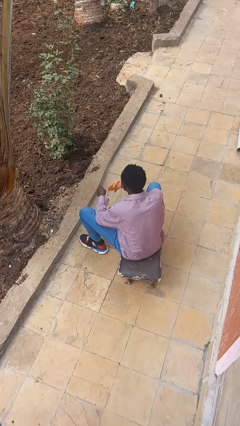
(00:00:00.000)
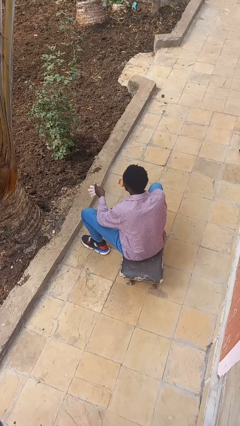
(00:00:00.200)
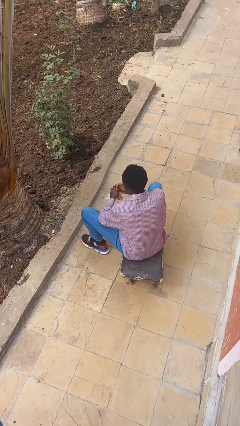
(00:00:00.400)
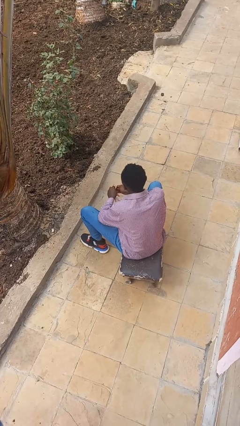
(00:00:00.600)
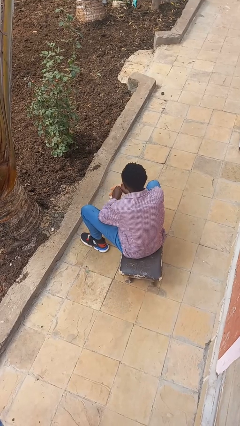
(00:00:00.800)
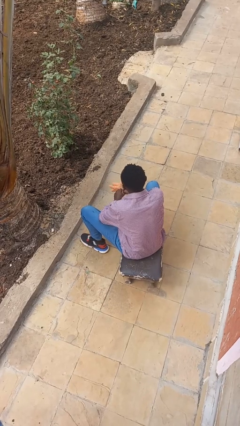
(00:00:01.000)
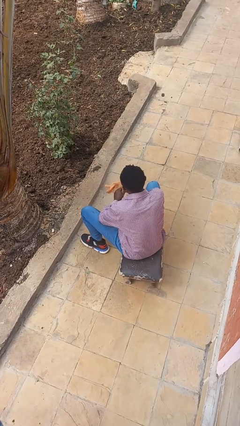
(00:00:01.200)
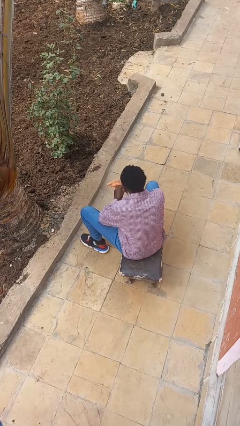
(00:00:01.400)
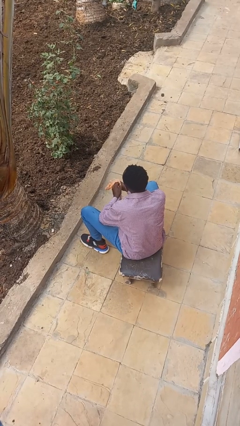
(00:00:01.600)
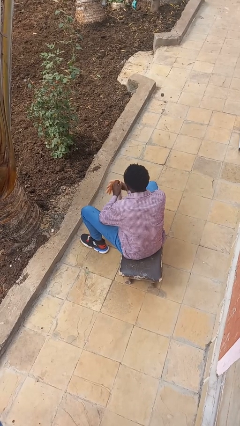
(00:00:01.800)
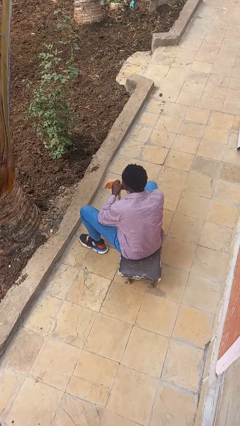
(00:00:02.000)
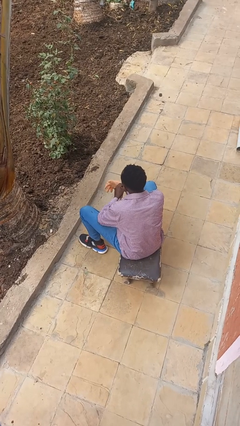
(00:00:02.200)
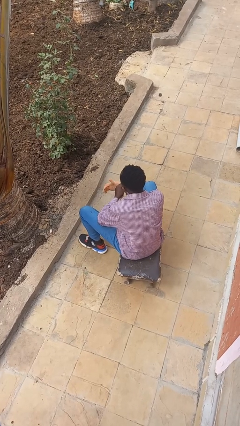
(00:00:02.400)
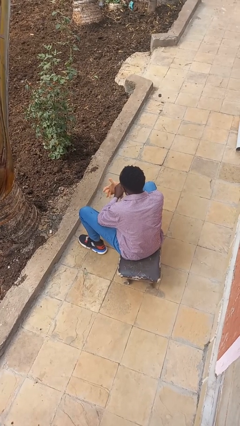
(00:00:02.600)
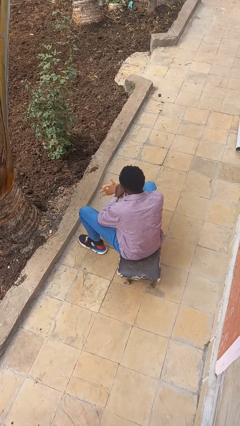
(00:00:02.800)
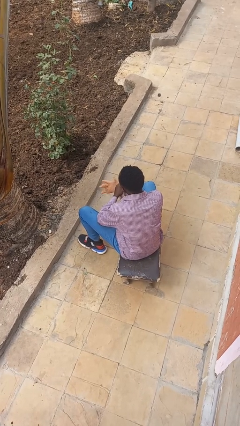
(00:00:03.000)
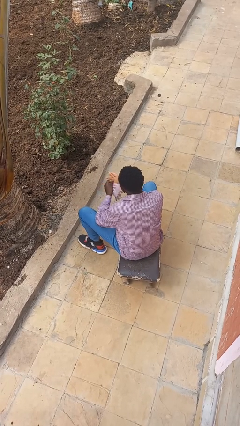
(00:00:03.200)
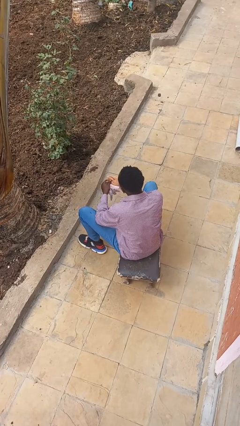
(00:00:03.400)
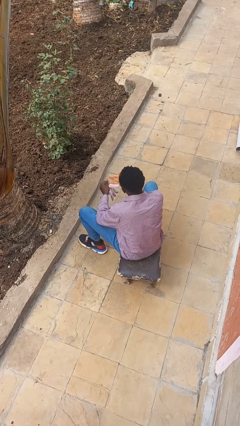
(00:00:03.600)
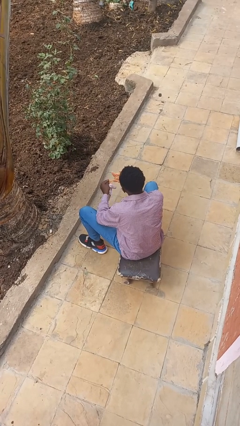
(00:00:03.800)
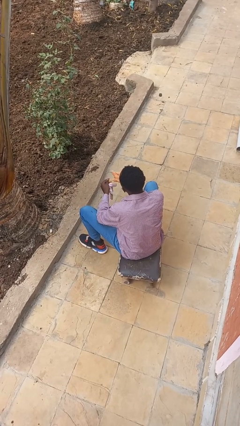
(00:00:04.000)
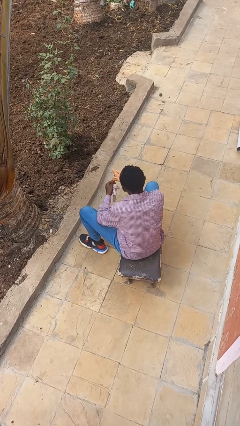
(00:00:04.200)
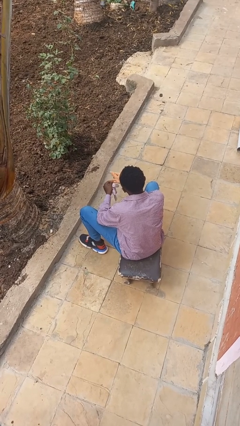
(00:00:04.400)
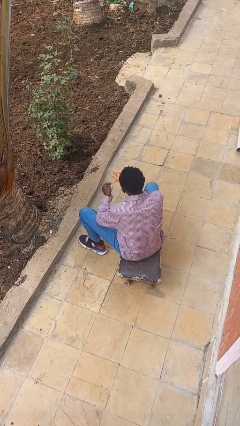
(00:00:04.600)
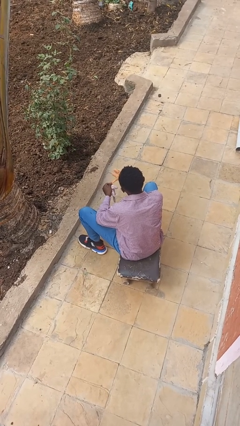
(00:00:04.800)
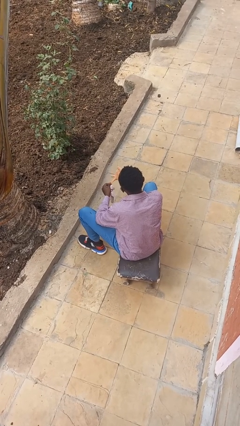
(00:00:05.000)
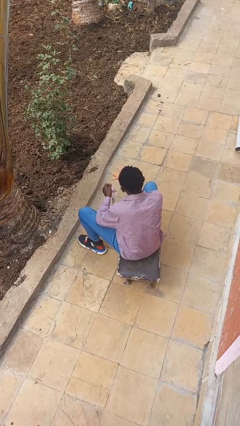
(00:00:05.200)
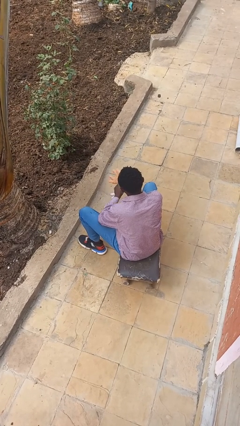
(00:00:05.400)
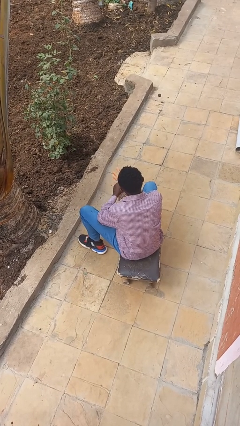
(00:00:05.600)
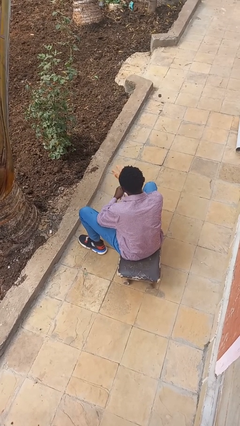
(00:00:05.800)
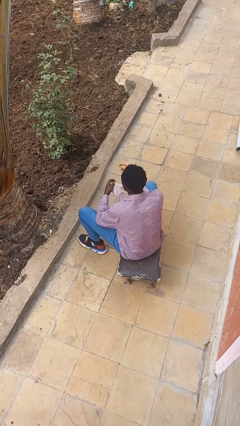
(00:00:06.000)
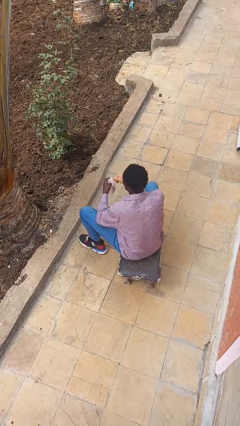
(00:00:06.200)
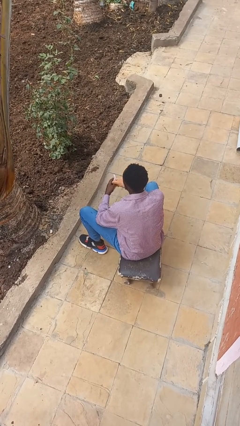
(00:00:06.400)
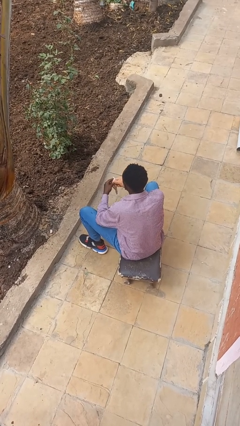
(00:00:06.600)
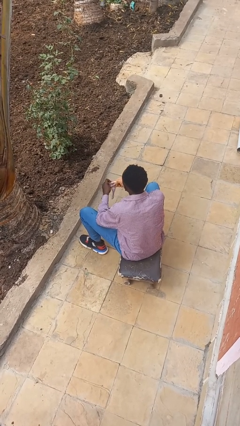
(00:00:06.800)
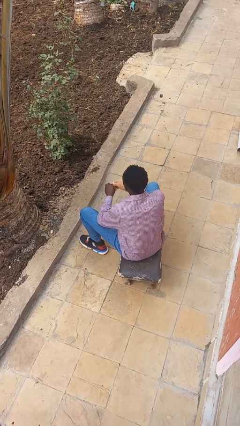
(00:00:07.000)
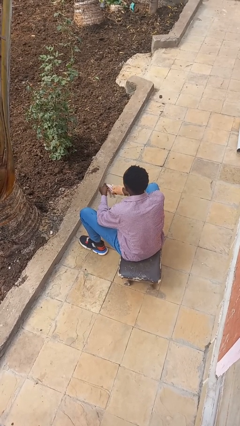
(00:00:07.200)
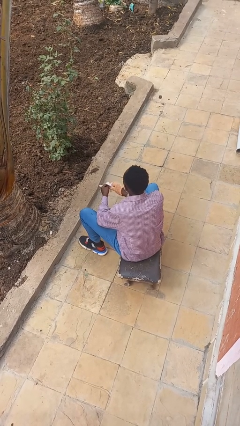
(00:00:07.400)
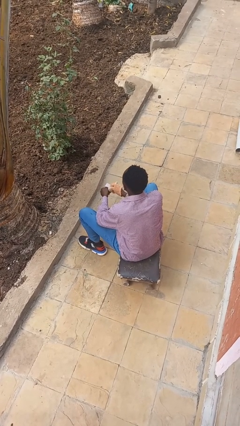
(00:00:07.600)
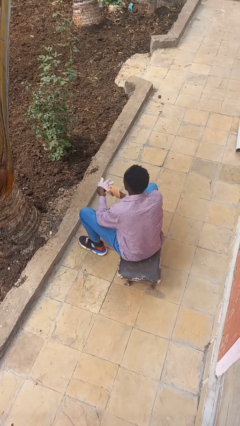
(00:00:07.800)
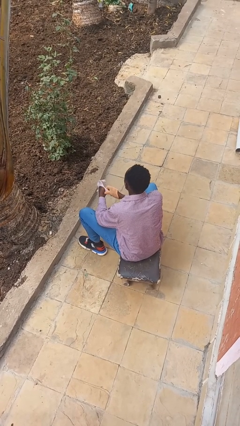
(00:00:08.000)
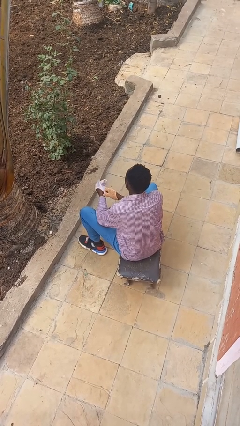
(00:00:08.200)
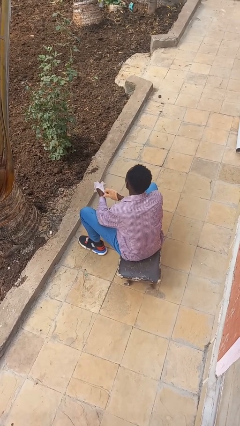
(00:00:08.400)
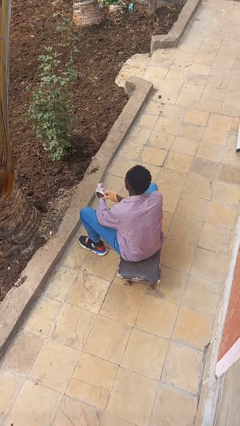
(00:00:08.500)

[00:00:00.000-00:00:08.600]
person puts on gloves

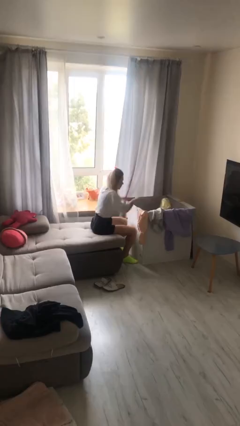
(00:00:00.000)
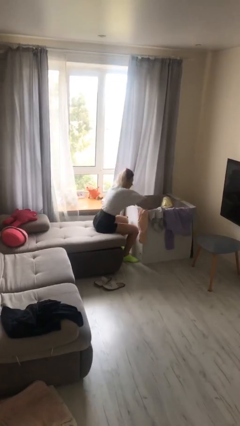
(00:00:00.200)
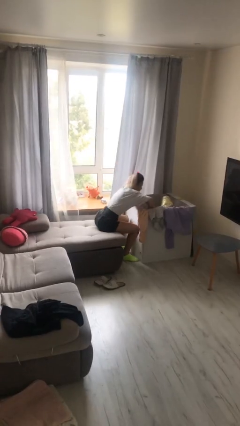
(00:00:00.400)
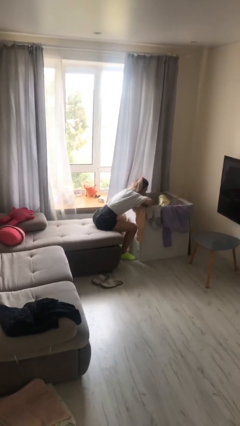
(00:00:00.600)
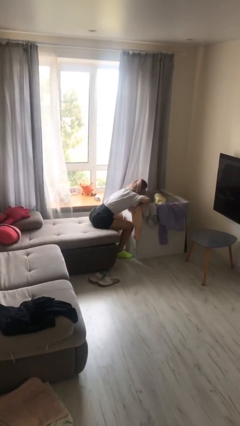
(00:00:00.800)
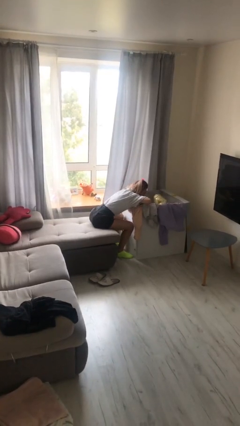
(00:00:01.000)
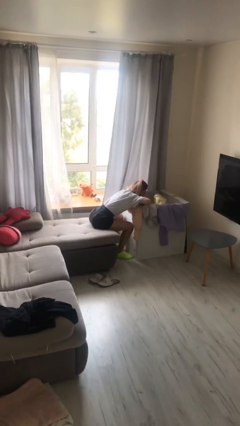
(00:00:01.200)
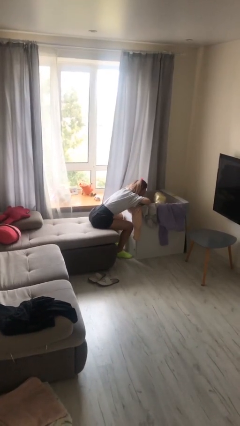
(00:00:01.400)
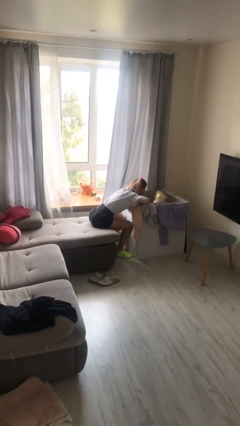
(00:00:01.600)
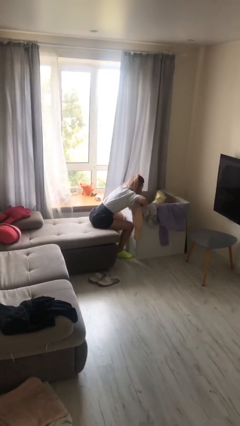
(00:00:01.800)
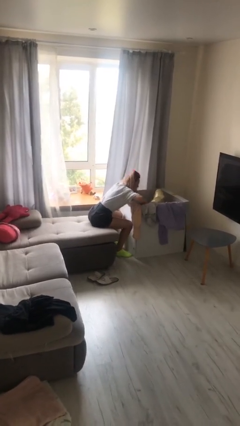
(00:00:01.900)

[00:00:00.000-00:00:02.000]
person searches in box

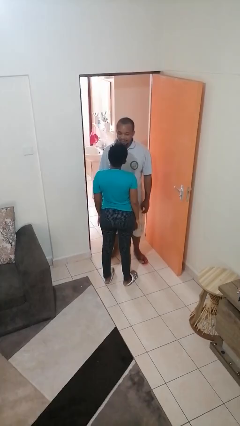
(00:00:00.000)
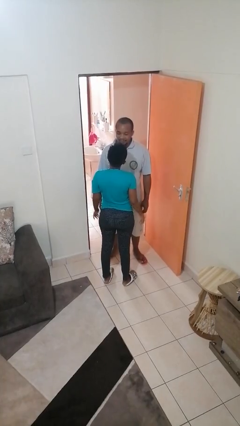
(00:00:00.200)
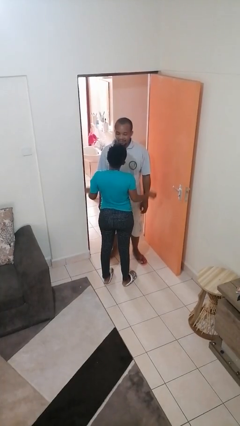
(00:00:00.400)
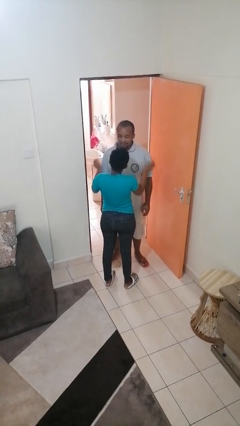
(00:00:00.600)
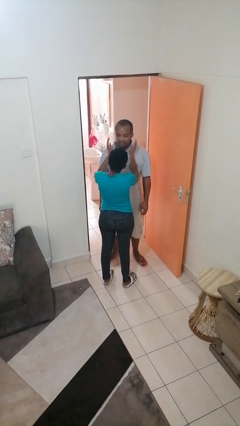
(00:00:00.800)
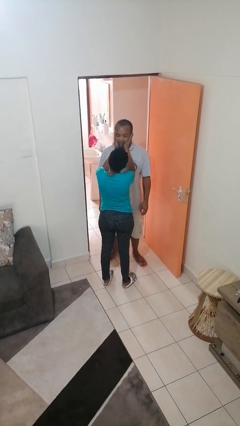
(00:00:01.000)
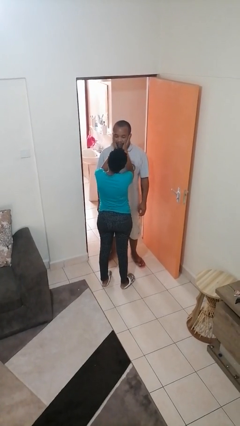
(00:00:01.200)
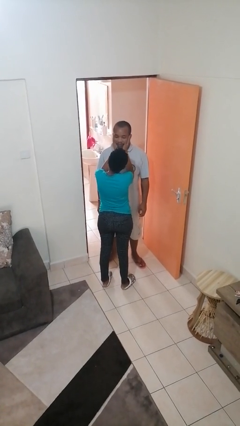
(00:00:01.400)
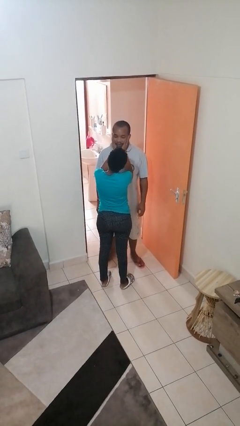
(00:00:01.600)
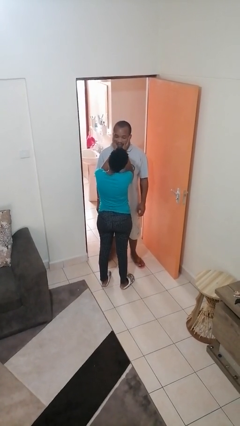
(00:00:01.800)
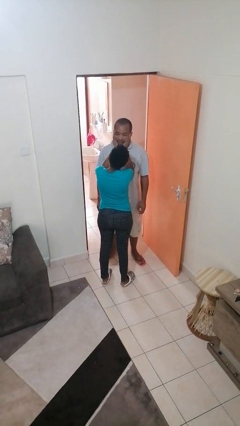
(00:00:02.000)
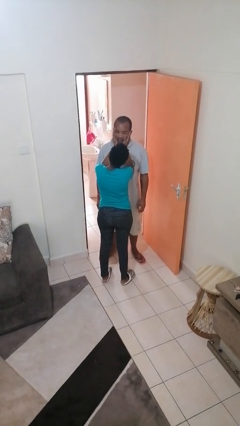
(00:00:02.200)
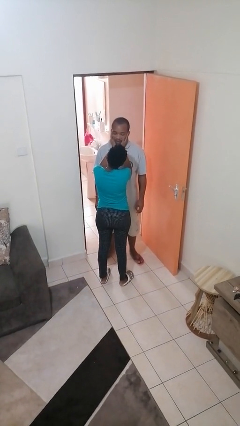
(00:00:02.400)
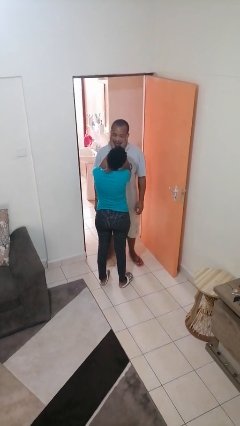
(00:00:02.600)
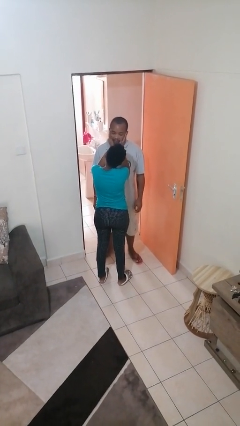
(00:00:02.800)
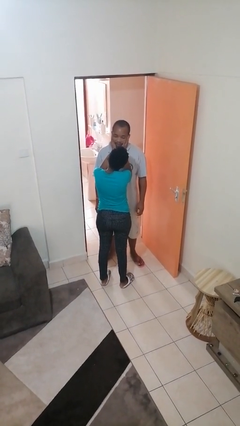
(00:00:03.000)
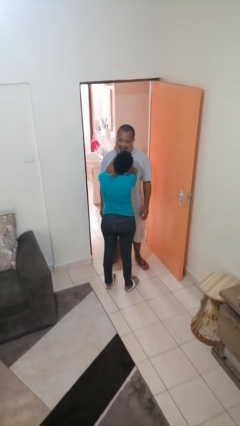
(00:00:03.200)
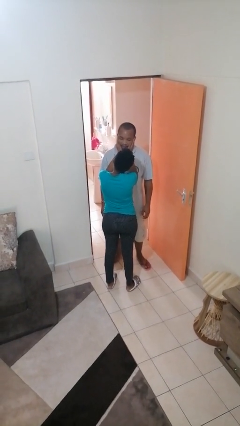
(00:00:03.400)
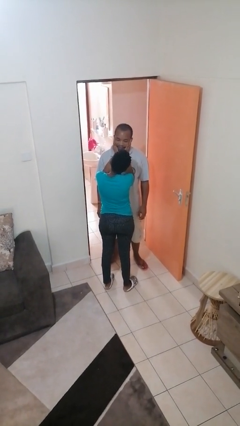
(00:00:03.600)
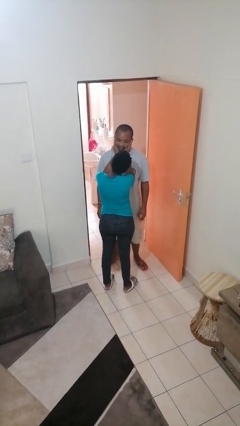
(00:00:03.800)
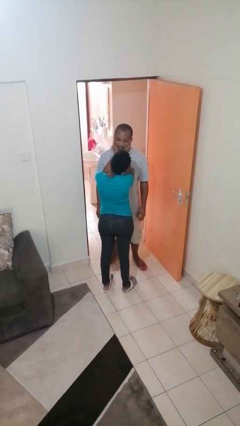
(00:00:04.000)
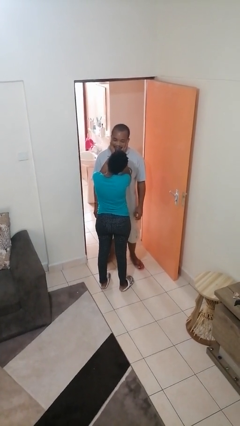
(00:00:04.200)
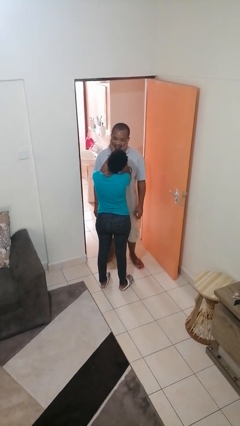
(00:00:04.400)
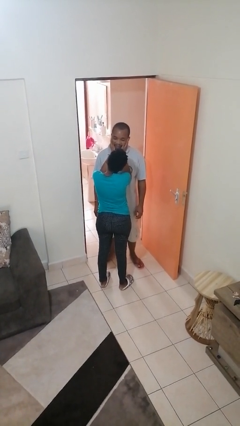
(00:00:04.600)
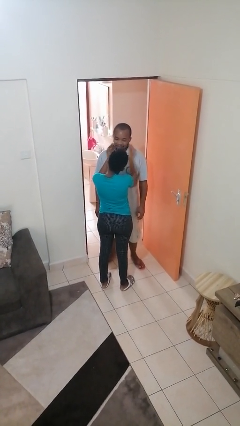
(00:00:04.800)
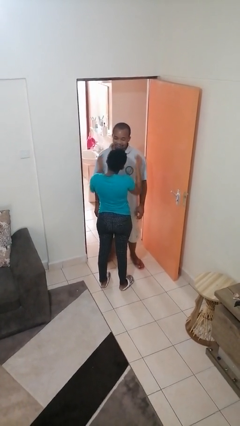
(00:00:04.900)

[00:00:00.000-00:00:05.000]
person touches face of person

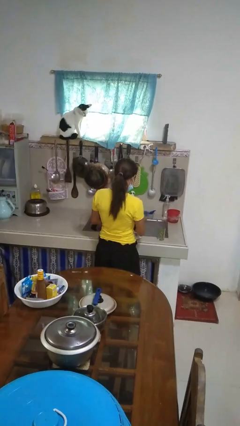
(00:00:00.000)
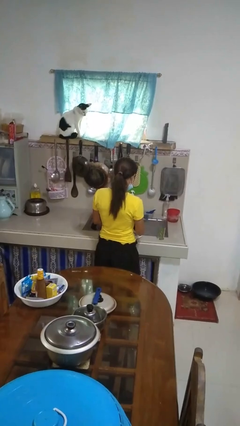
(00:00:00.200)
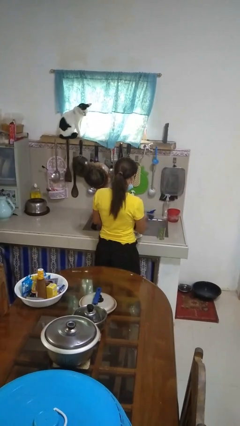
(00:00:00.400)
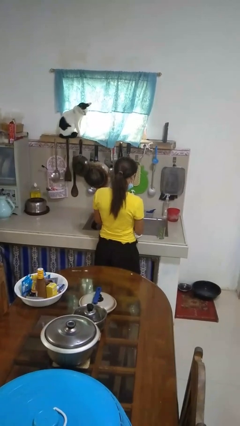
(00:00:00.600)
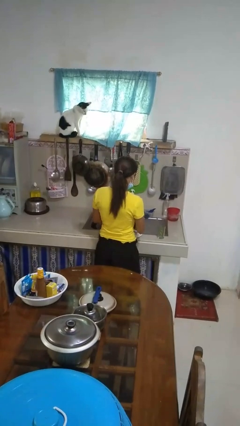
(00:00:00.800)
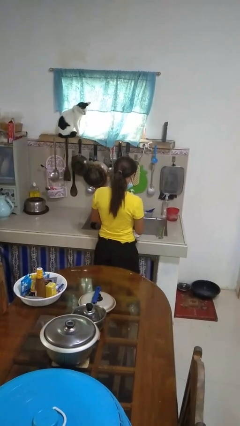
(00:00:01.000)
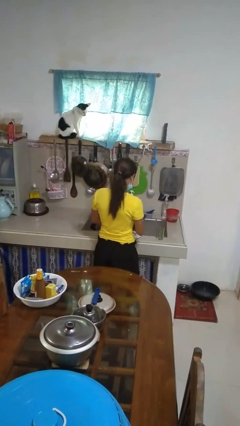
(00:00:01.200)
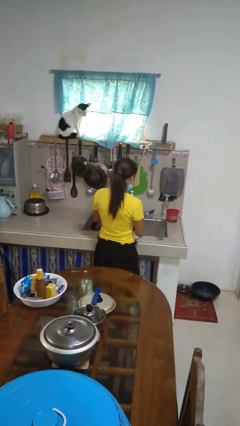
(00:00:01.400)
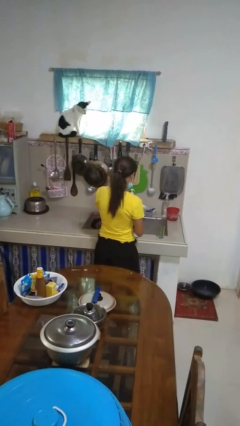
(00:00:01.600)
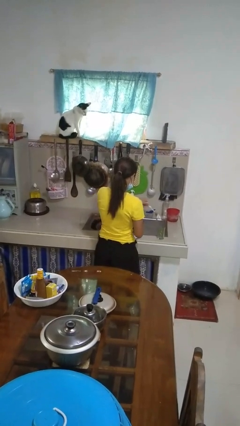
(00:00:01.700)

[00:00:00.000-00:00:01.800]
person dries dish

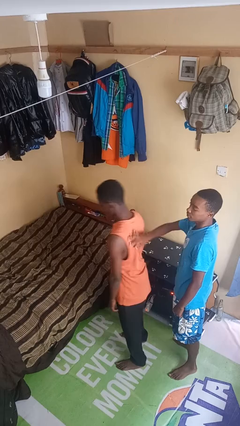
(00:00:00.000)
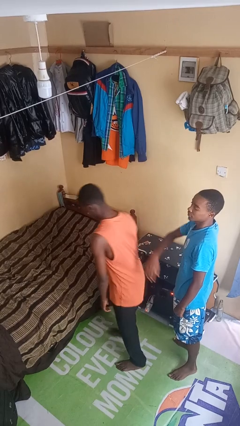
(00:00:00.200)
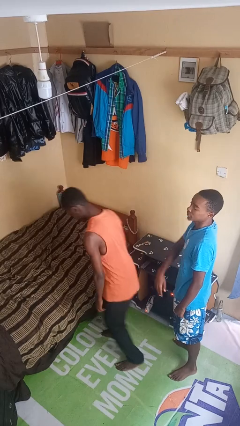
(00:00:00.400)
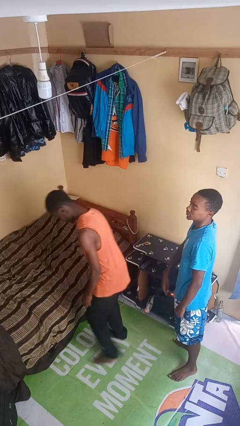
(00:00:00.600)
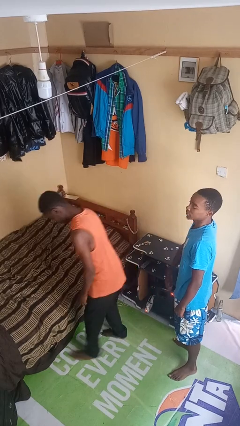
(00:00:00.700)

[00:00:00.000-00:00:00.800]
person shoves person
